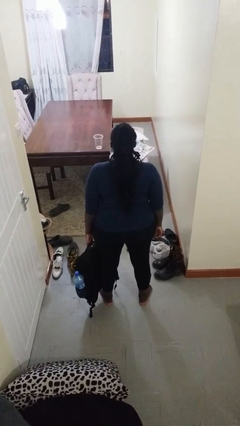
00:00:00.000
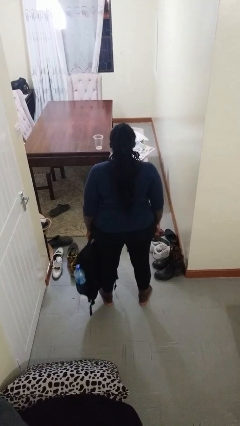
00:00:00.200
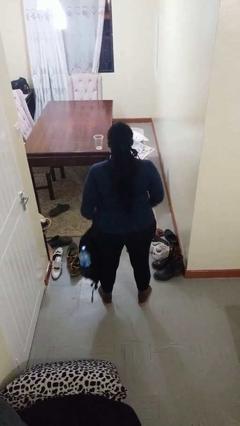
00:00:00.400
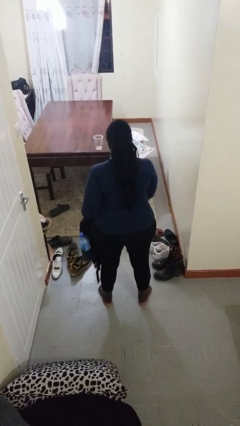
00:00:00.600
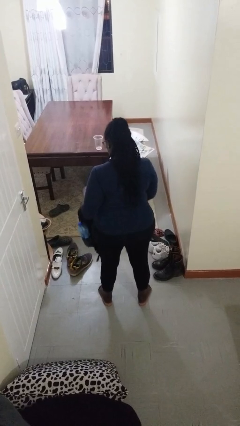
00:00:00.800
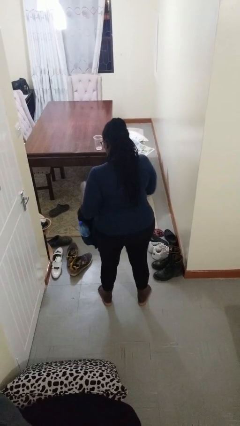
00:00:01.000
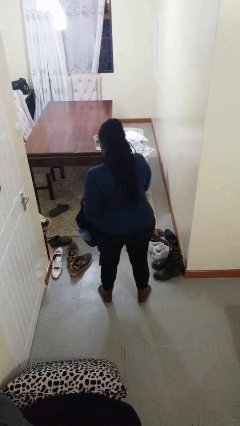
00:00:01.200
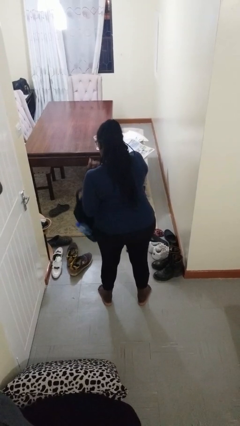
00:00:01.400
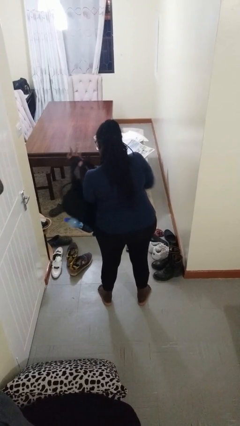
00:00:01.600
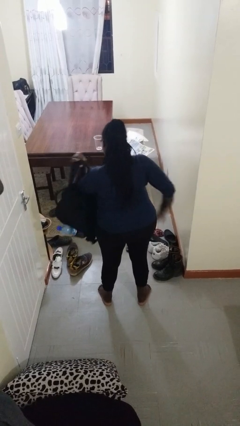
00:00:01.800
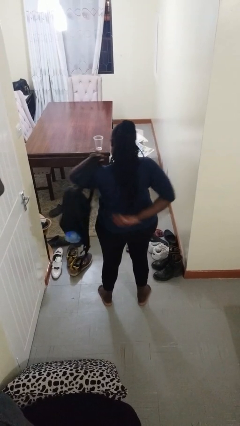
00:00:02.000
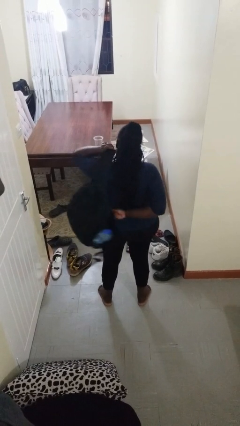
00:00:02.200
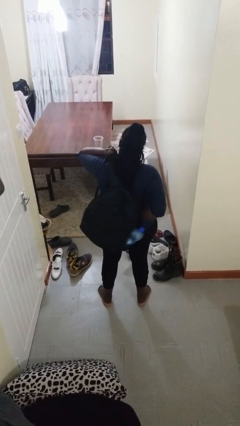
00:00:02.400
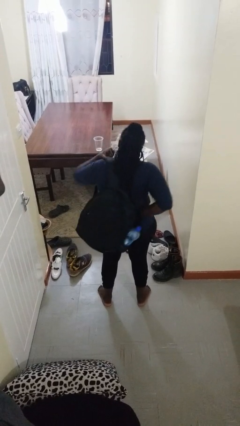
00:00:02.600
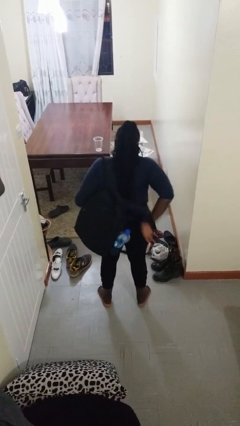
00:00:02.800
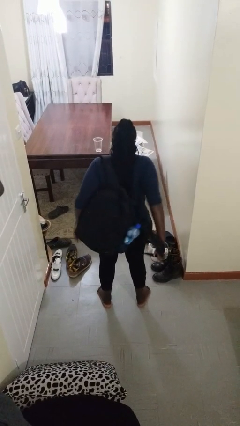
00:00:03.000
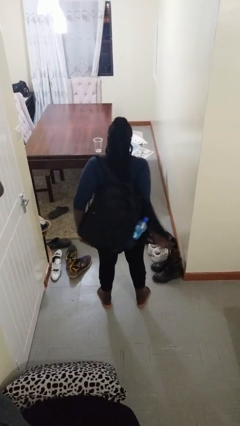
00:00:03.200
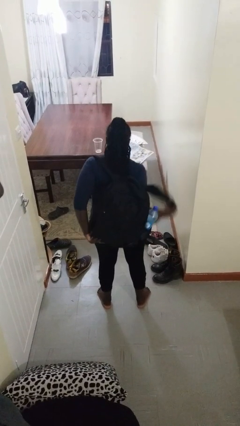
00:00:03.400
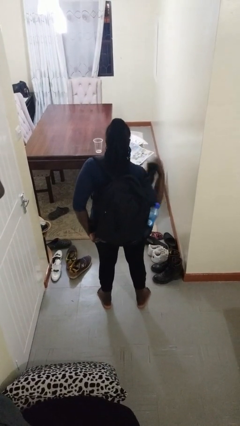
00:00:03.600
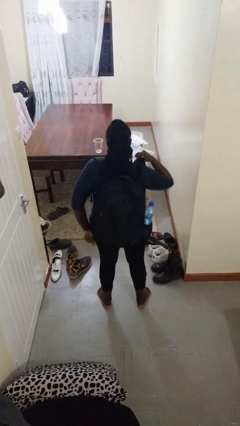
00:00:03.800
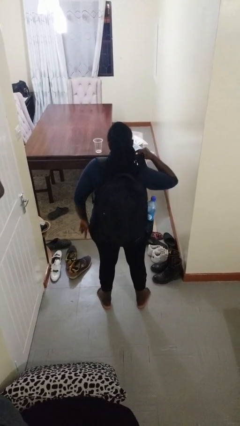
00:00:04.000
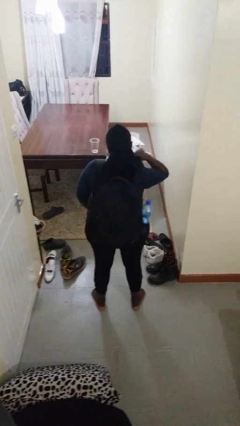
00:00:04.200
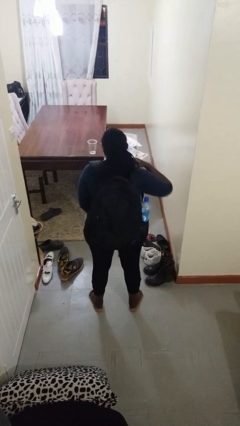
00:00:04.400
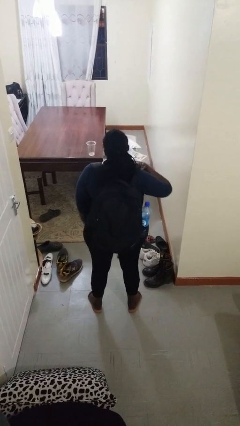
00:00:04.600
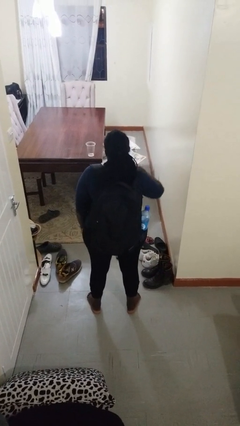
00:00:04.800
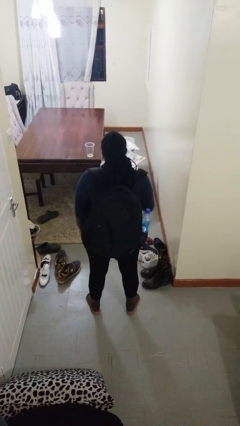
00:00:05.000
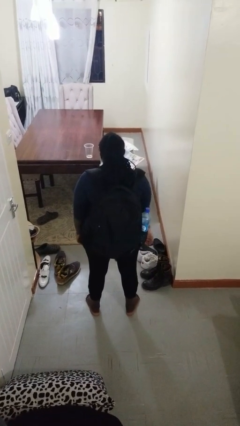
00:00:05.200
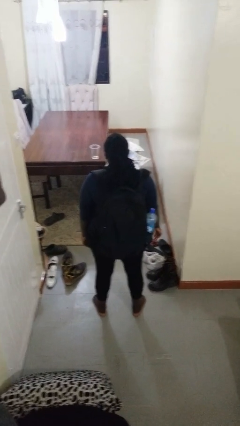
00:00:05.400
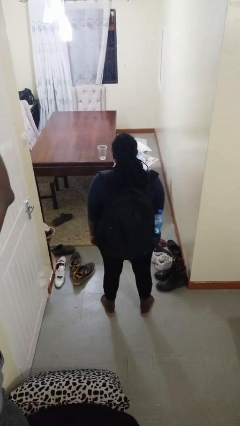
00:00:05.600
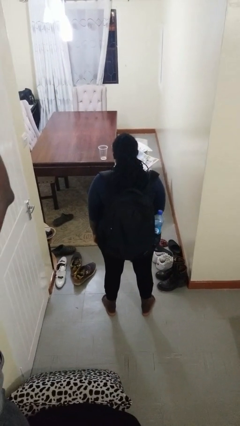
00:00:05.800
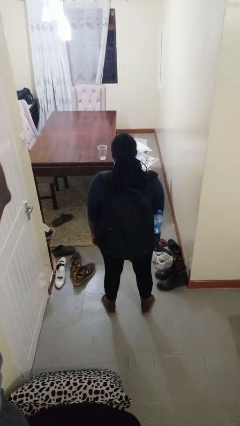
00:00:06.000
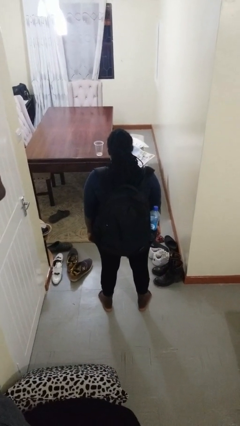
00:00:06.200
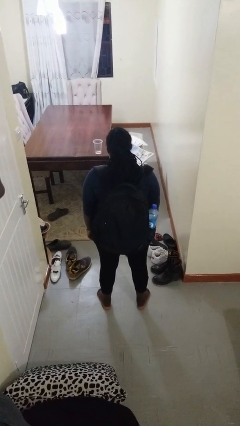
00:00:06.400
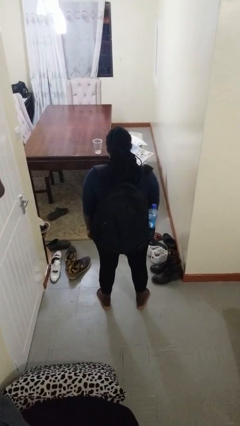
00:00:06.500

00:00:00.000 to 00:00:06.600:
person puts on backpack

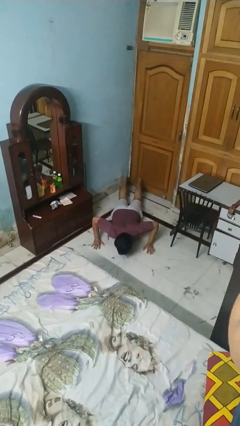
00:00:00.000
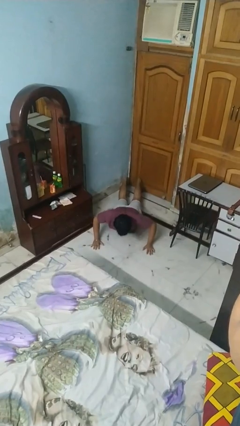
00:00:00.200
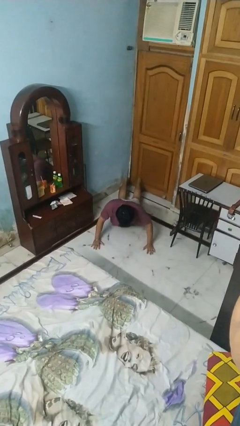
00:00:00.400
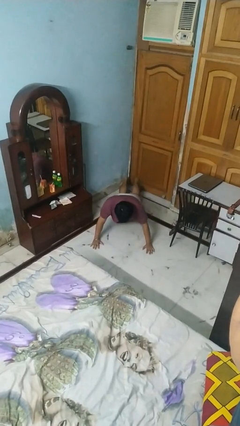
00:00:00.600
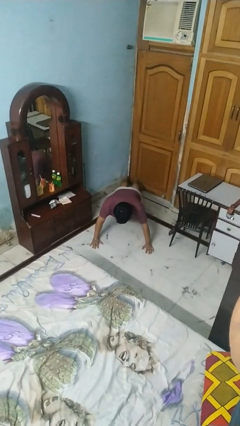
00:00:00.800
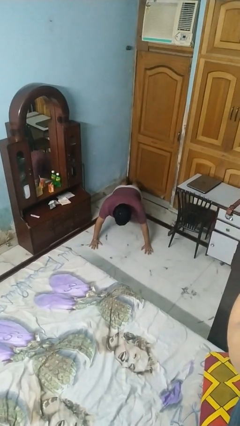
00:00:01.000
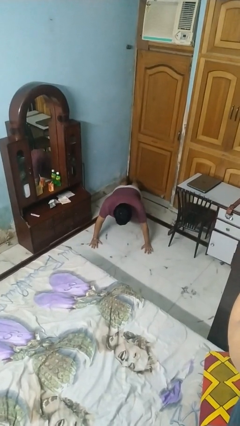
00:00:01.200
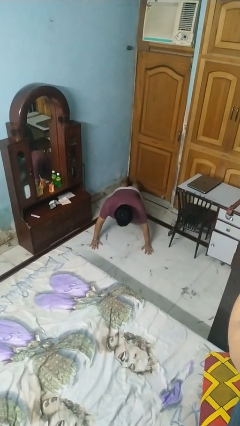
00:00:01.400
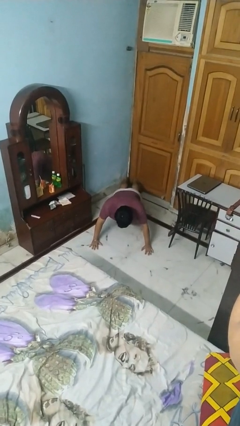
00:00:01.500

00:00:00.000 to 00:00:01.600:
person exercises with pushup

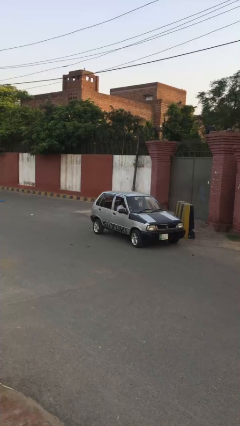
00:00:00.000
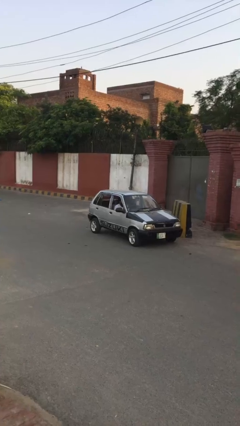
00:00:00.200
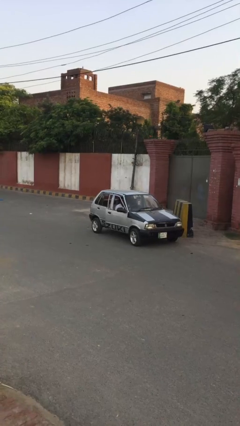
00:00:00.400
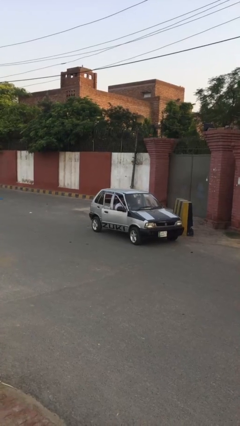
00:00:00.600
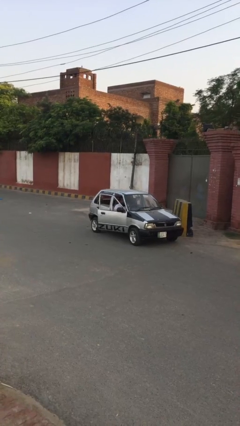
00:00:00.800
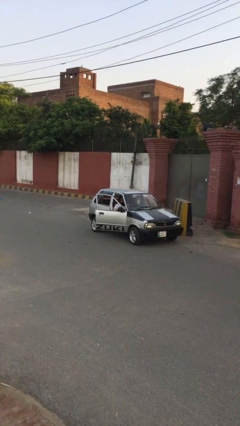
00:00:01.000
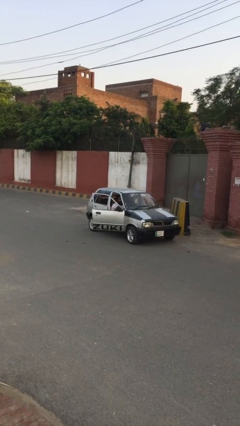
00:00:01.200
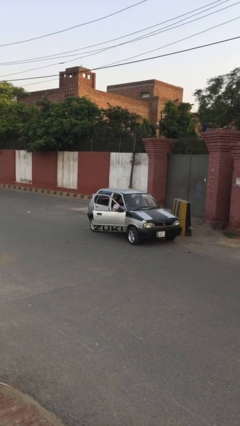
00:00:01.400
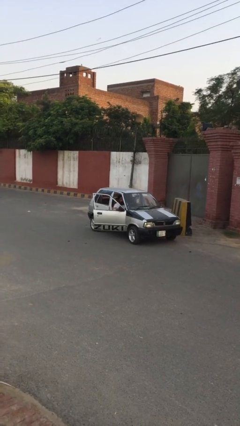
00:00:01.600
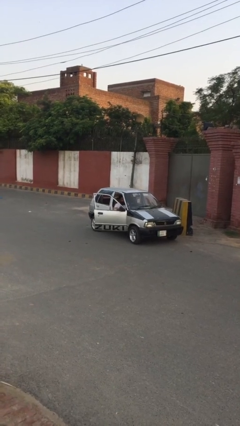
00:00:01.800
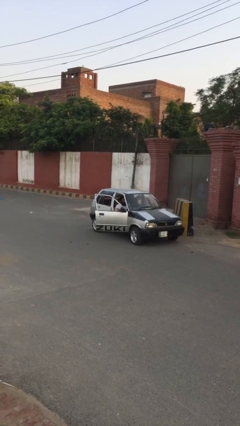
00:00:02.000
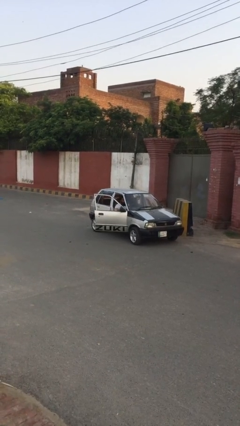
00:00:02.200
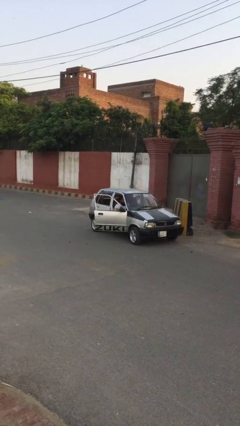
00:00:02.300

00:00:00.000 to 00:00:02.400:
person opens car door

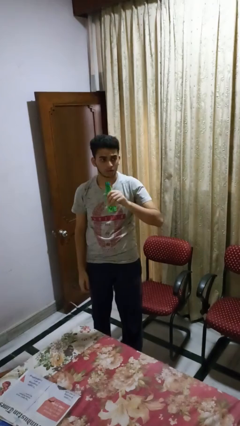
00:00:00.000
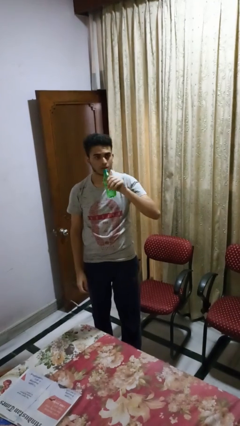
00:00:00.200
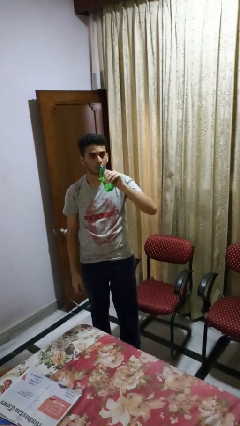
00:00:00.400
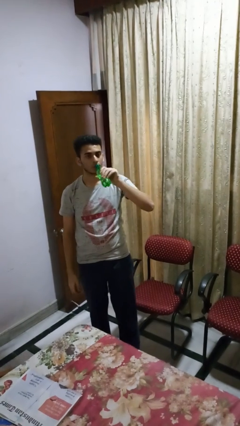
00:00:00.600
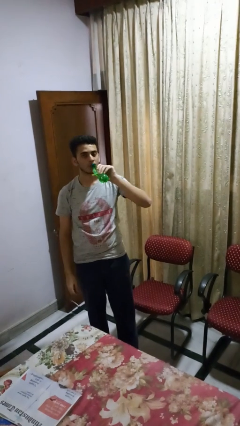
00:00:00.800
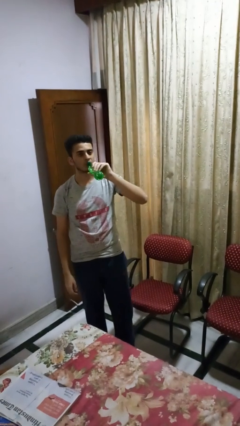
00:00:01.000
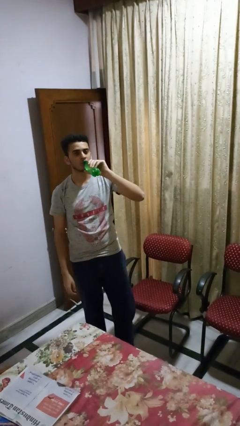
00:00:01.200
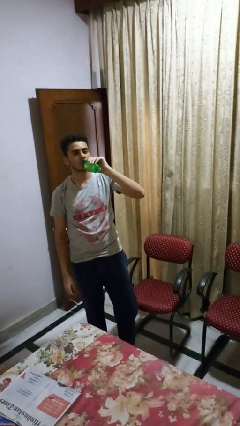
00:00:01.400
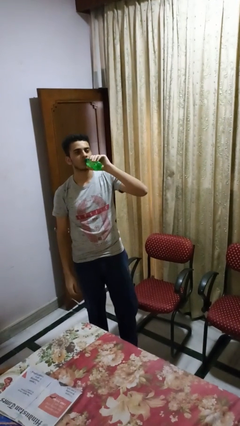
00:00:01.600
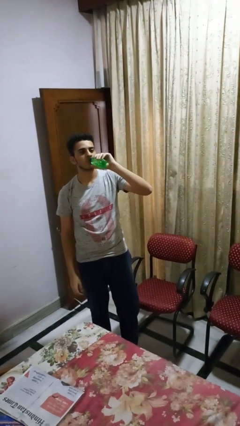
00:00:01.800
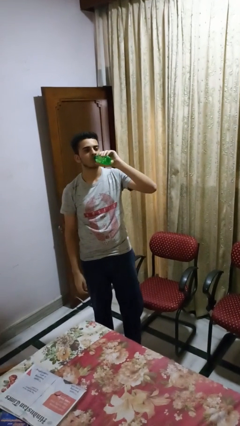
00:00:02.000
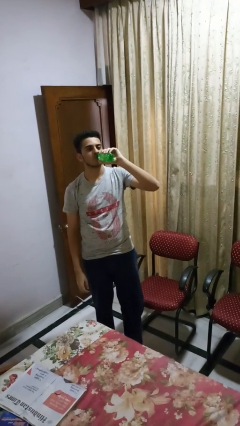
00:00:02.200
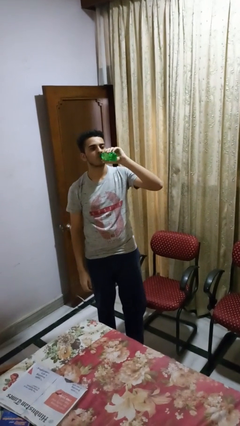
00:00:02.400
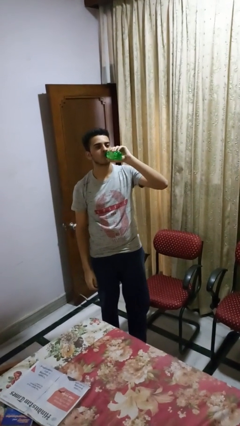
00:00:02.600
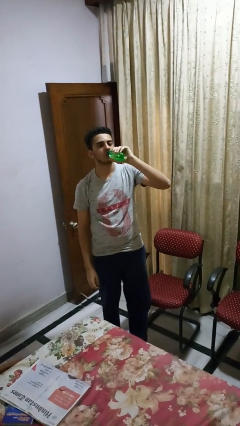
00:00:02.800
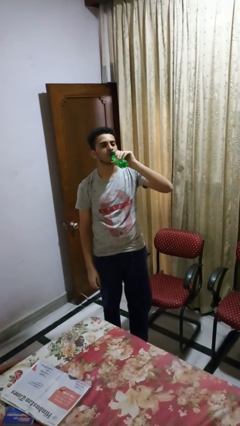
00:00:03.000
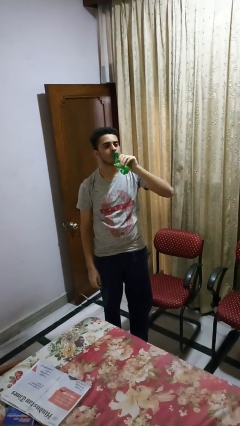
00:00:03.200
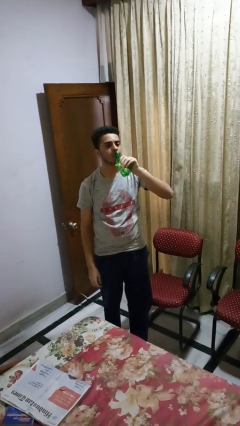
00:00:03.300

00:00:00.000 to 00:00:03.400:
person drinks from bottle

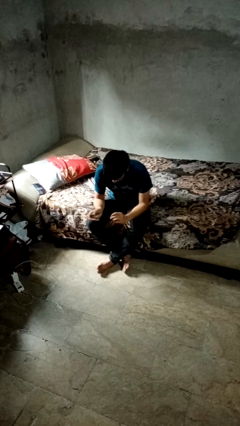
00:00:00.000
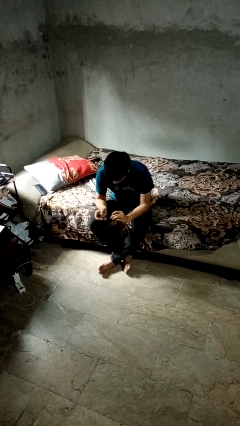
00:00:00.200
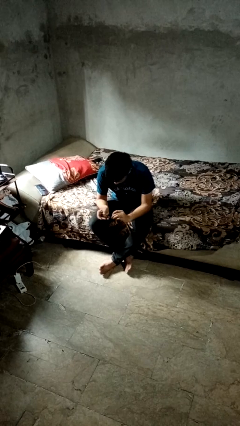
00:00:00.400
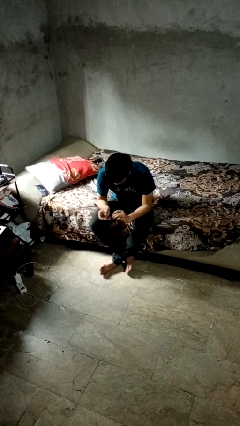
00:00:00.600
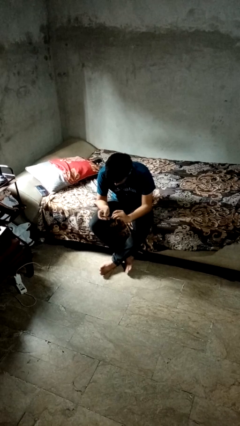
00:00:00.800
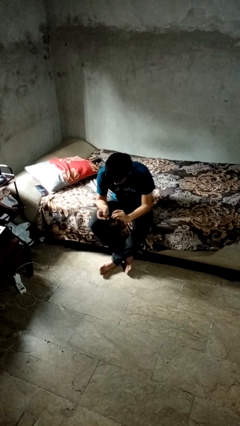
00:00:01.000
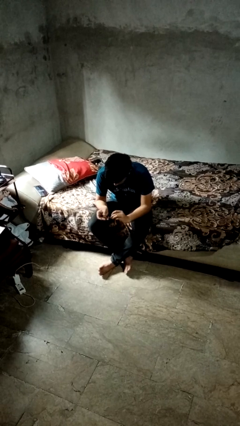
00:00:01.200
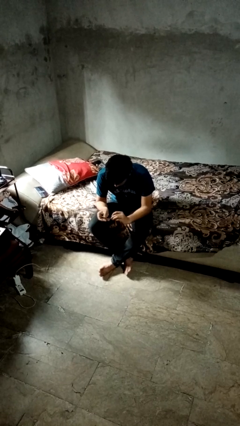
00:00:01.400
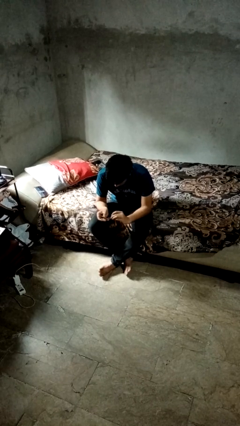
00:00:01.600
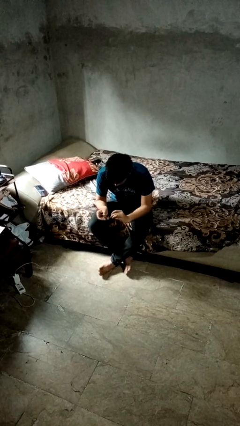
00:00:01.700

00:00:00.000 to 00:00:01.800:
person clips fingernails

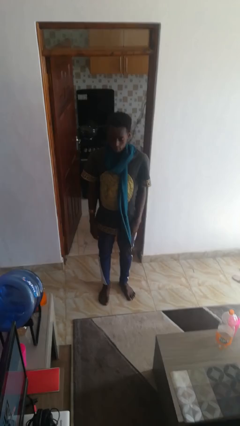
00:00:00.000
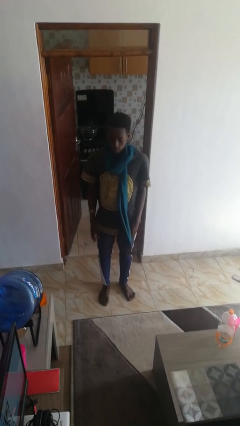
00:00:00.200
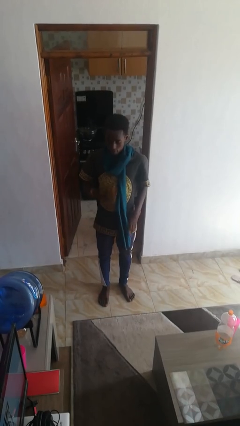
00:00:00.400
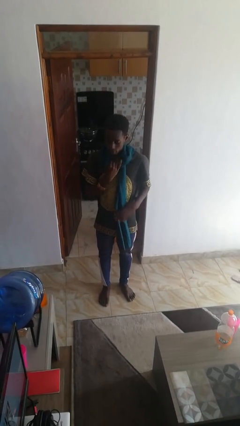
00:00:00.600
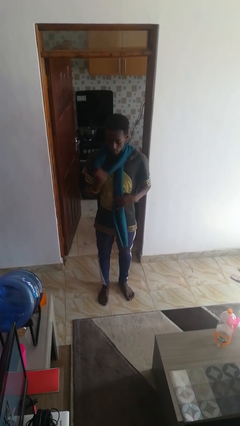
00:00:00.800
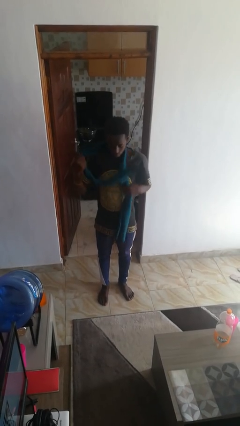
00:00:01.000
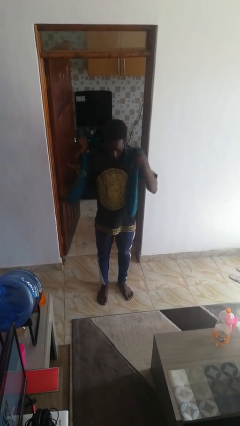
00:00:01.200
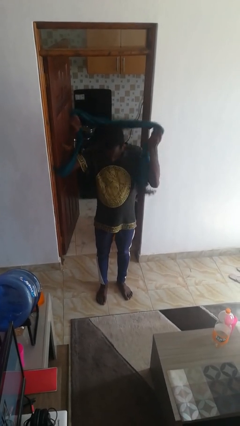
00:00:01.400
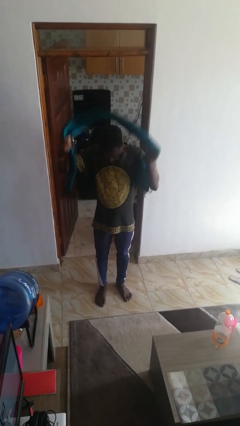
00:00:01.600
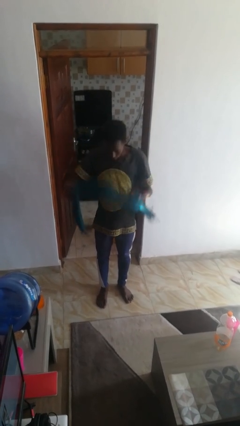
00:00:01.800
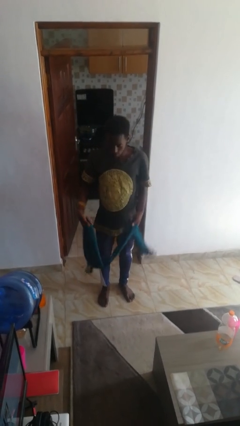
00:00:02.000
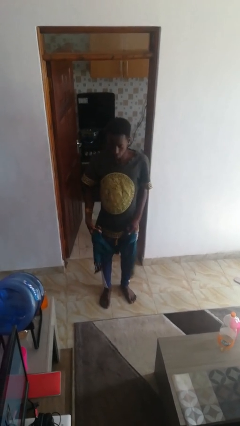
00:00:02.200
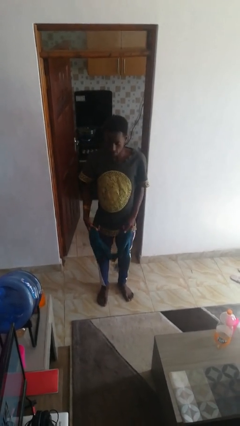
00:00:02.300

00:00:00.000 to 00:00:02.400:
person takes off scarf
